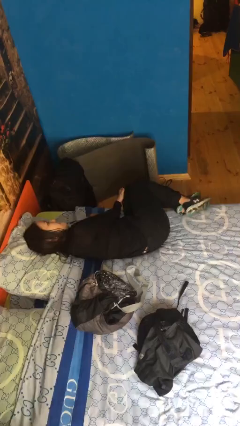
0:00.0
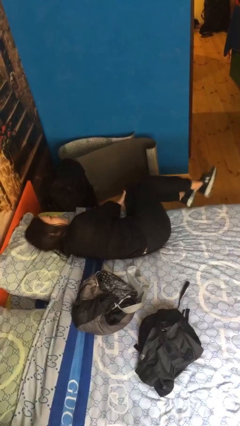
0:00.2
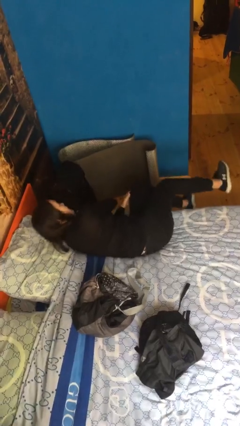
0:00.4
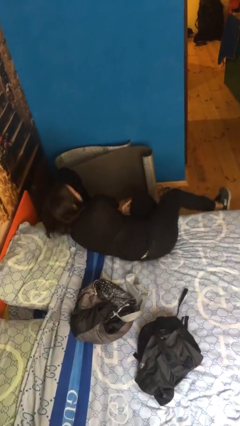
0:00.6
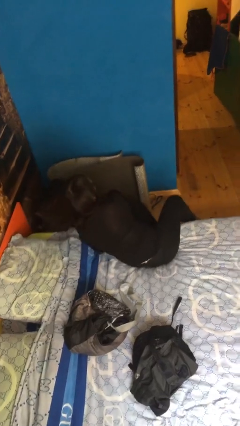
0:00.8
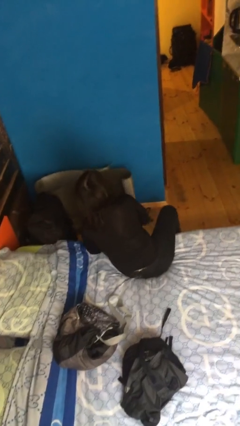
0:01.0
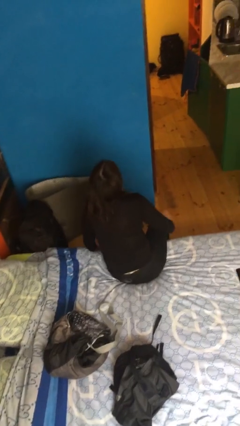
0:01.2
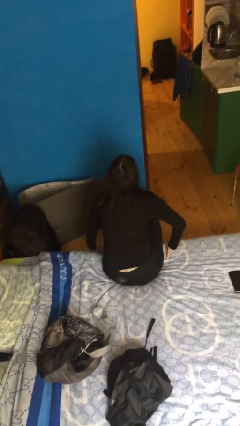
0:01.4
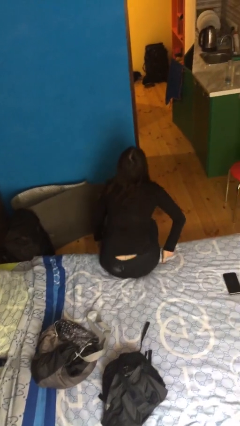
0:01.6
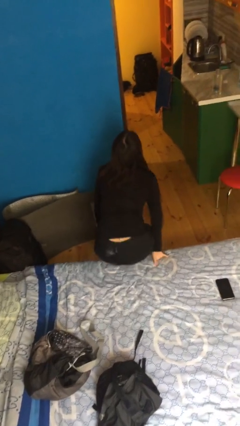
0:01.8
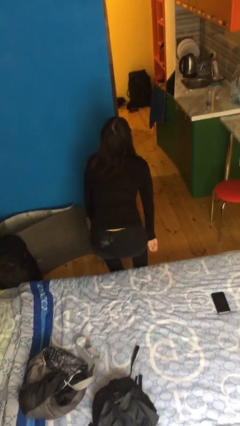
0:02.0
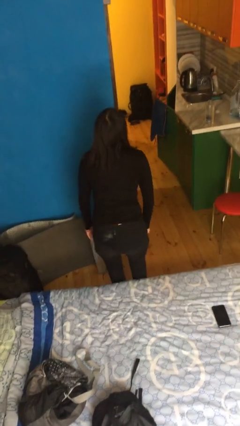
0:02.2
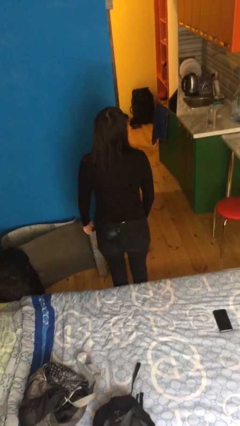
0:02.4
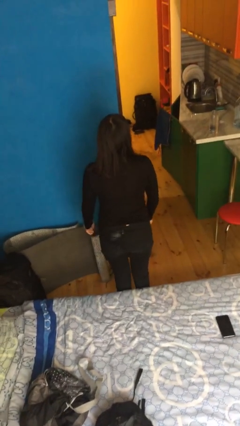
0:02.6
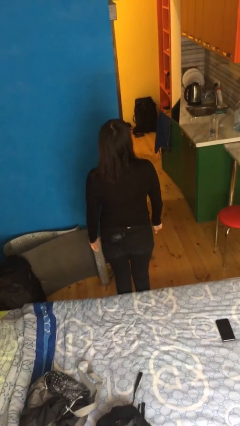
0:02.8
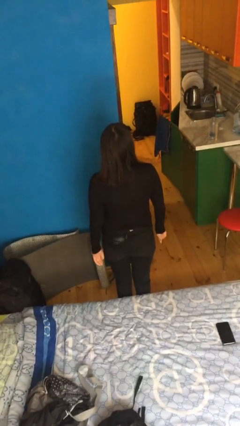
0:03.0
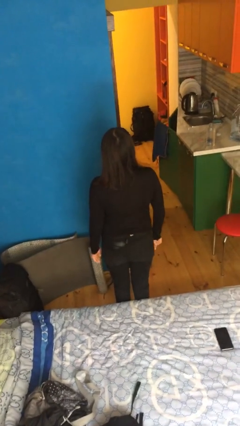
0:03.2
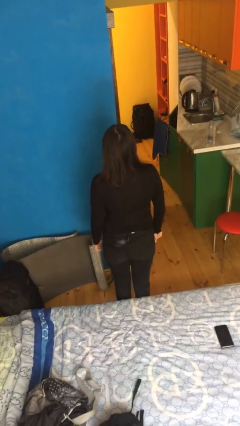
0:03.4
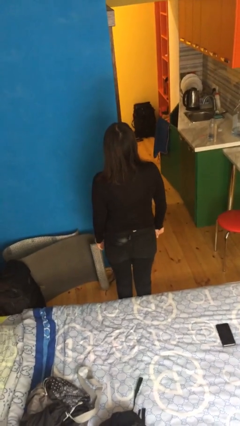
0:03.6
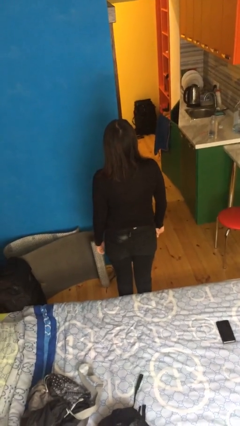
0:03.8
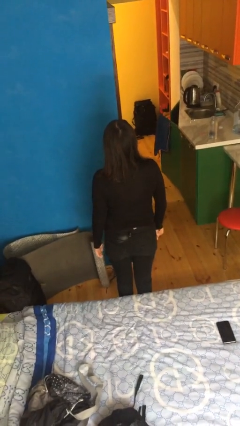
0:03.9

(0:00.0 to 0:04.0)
person stands up

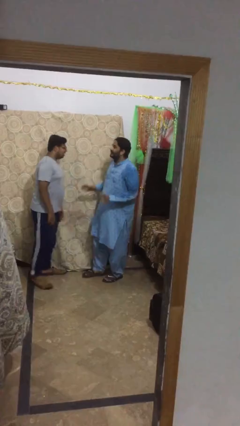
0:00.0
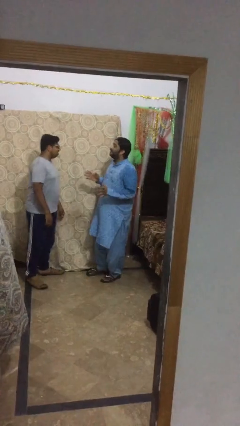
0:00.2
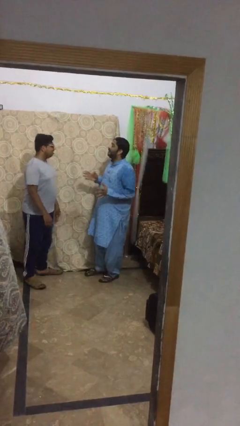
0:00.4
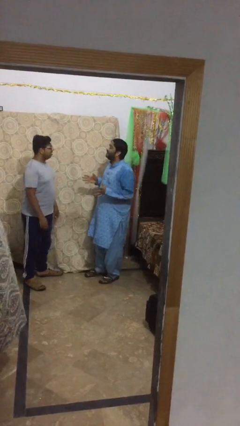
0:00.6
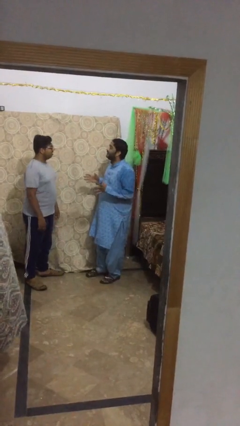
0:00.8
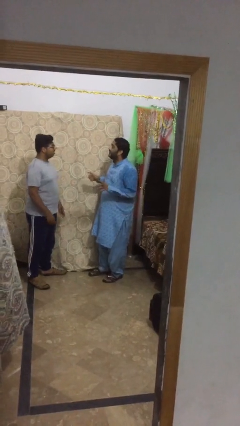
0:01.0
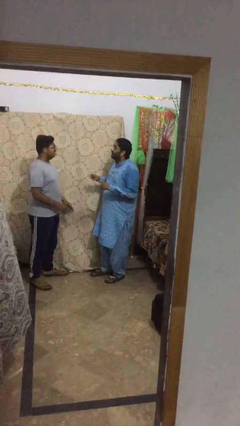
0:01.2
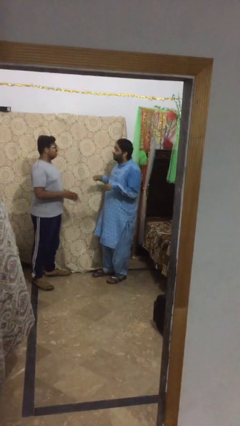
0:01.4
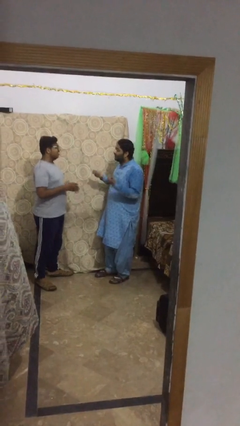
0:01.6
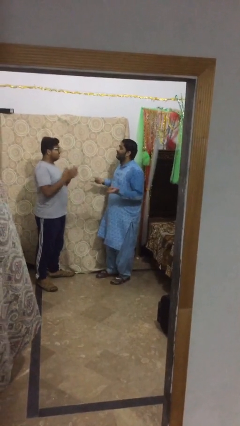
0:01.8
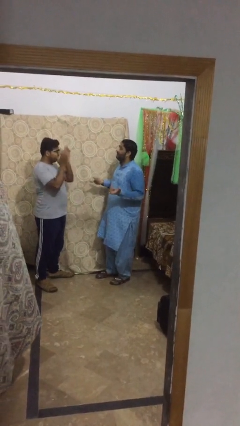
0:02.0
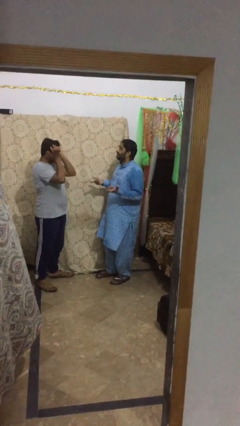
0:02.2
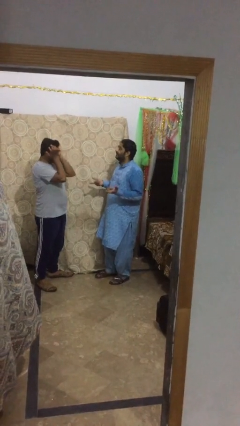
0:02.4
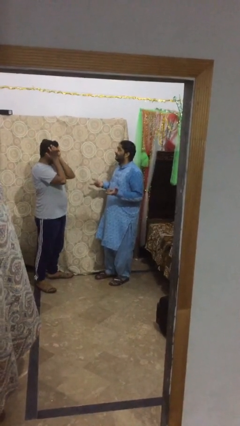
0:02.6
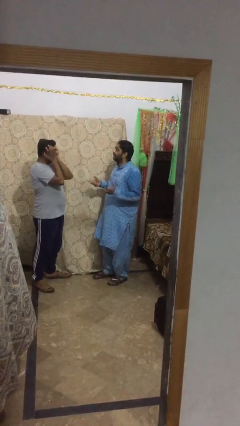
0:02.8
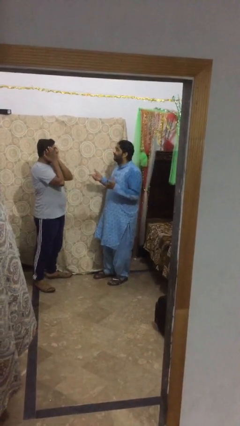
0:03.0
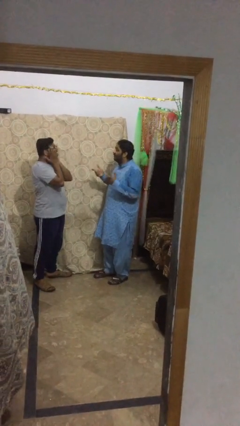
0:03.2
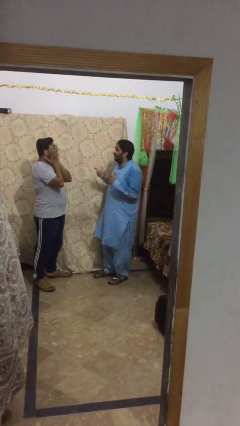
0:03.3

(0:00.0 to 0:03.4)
person talks to person

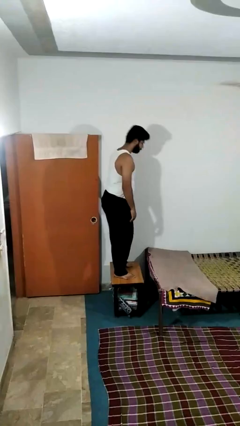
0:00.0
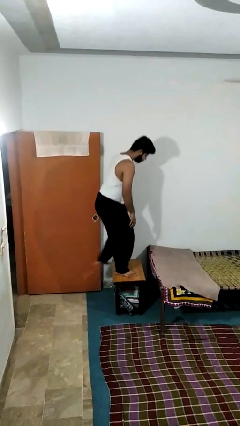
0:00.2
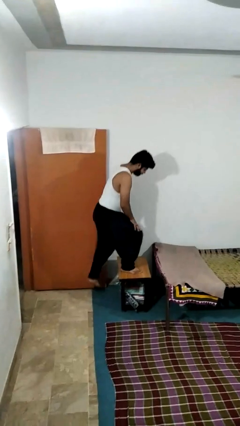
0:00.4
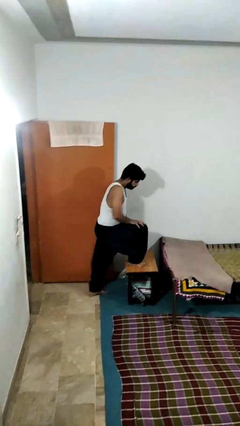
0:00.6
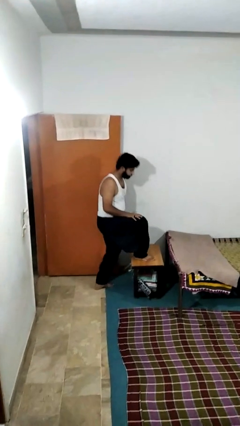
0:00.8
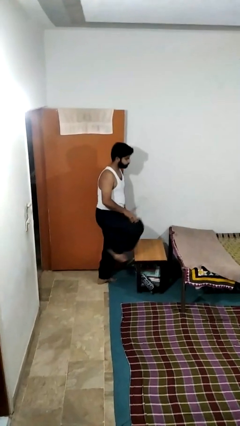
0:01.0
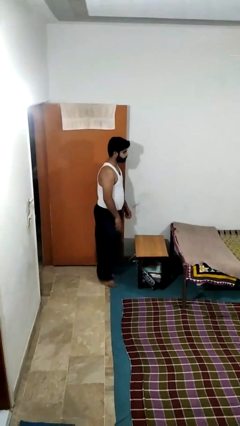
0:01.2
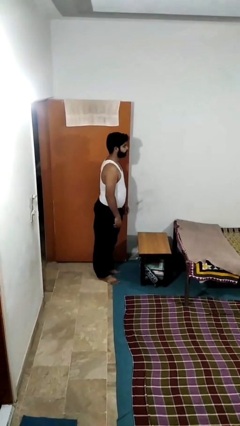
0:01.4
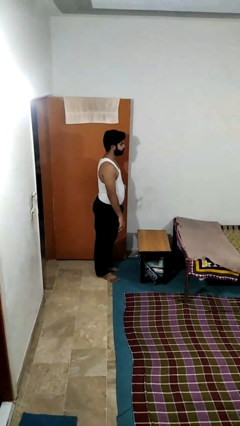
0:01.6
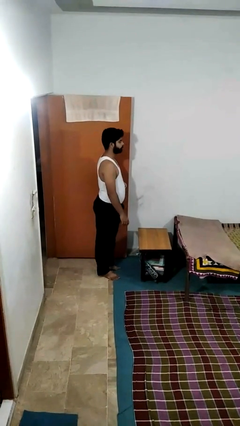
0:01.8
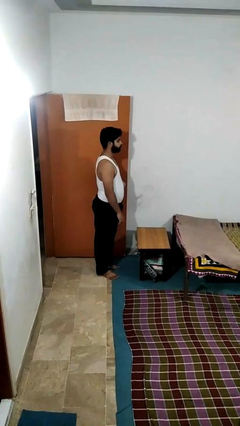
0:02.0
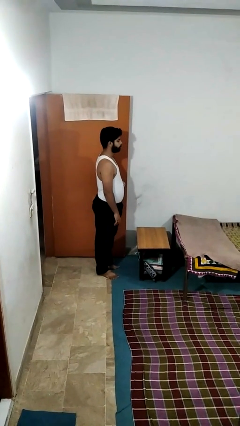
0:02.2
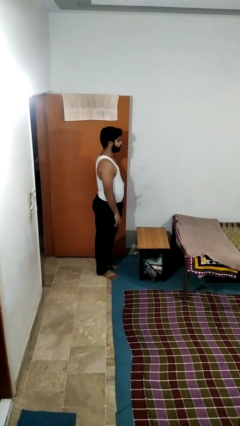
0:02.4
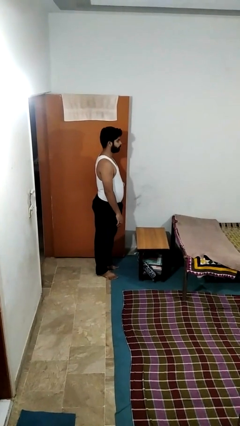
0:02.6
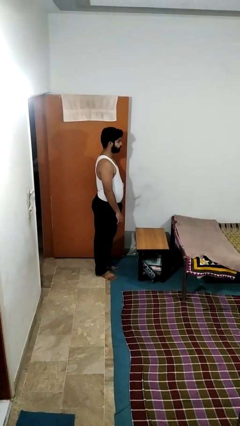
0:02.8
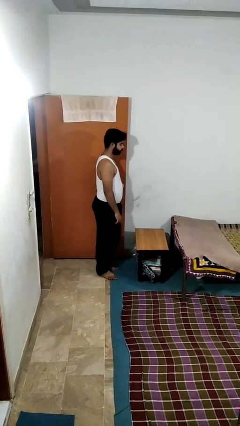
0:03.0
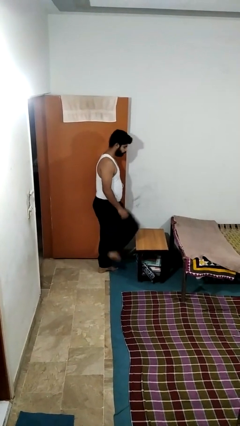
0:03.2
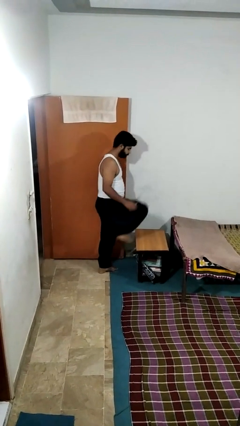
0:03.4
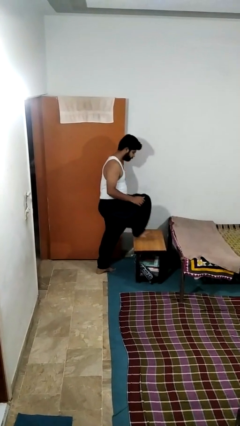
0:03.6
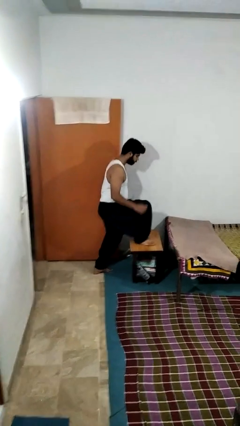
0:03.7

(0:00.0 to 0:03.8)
person climbs off table

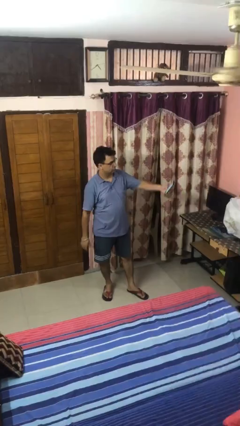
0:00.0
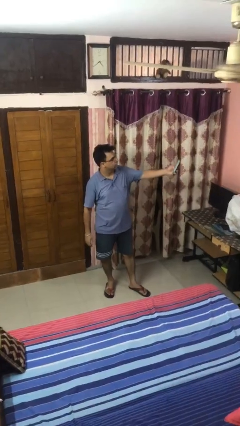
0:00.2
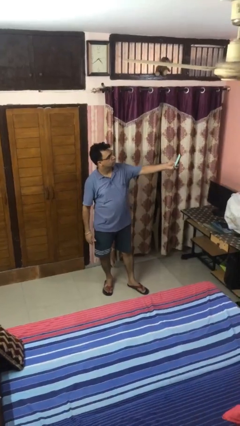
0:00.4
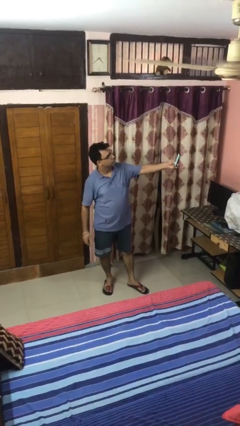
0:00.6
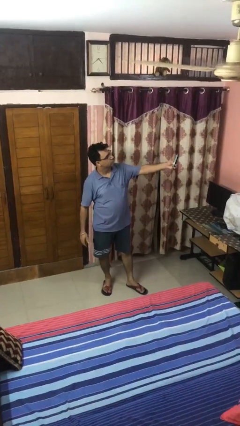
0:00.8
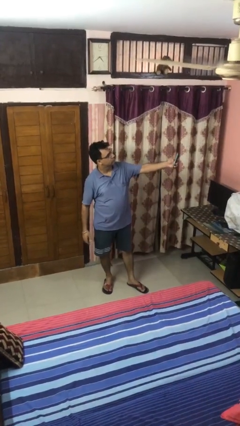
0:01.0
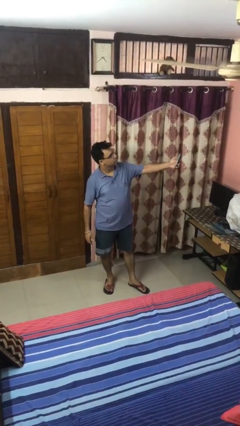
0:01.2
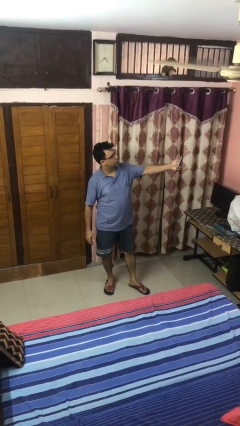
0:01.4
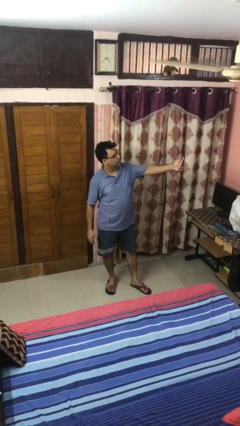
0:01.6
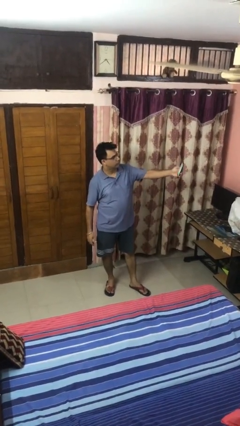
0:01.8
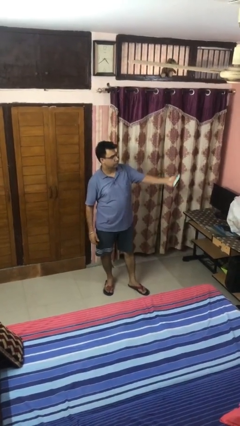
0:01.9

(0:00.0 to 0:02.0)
person takes selfie

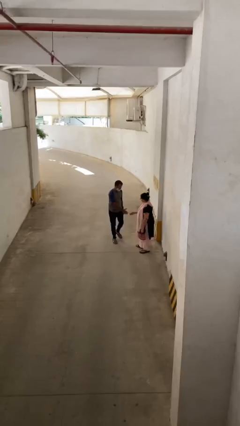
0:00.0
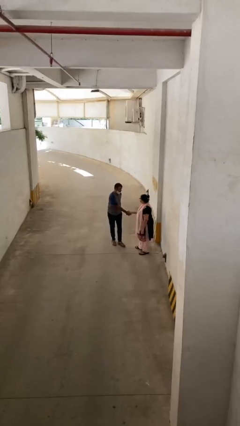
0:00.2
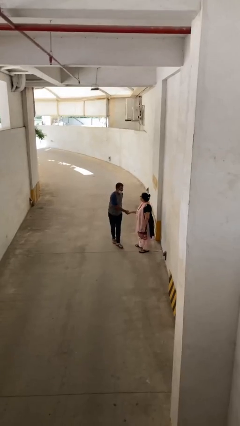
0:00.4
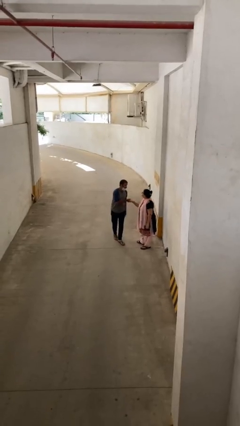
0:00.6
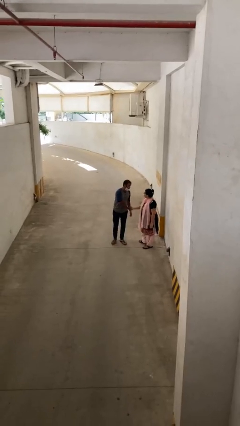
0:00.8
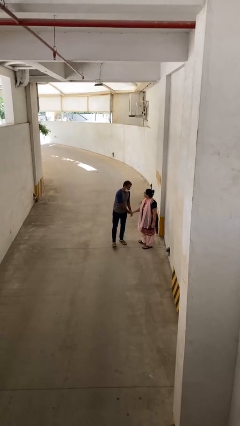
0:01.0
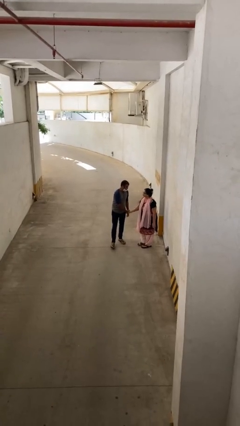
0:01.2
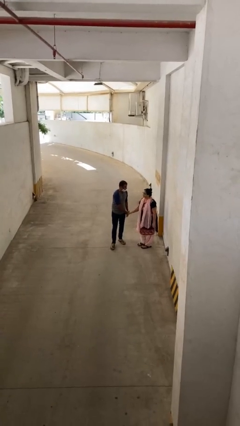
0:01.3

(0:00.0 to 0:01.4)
person shakes hand

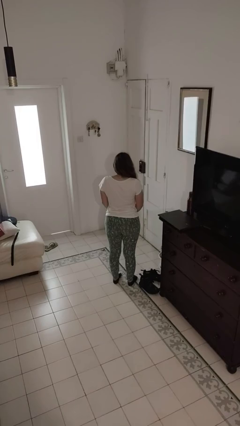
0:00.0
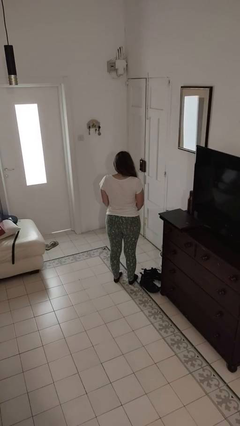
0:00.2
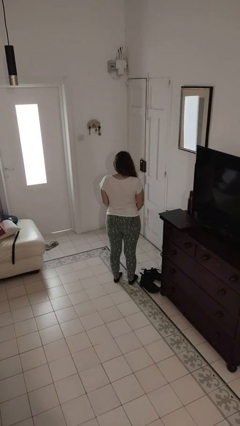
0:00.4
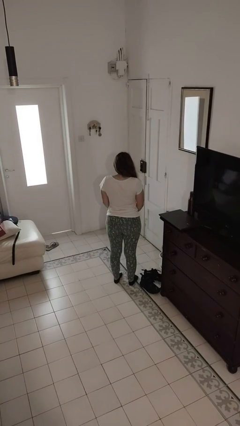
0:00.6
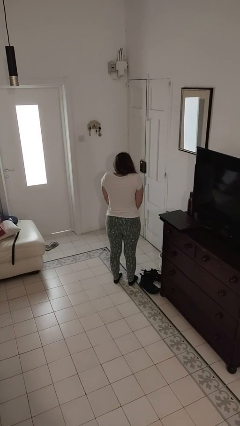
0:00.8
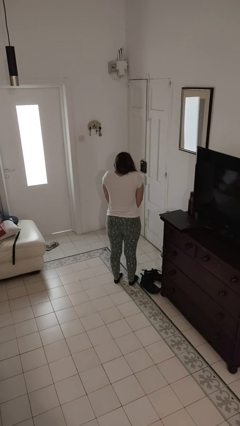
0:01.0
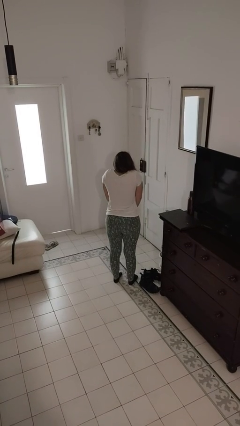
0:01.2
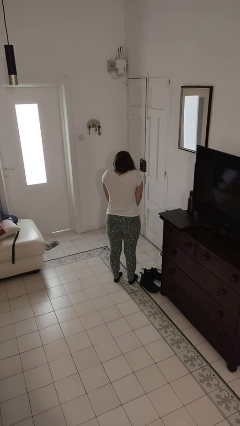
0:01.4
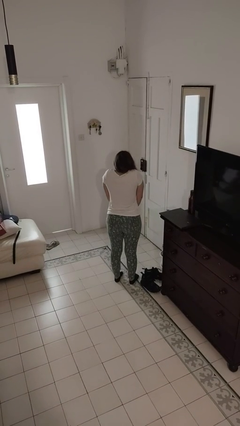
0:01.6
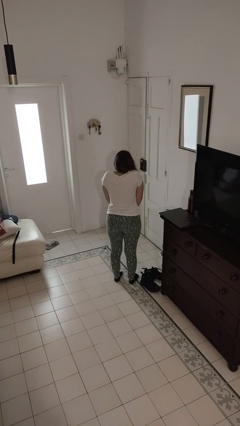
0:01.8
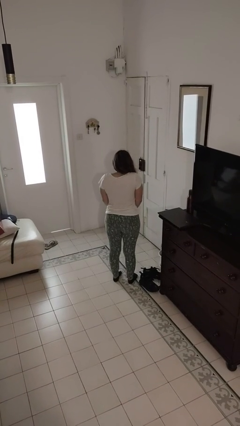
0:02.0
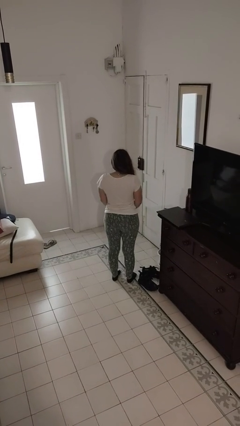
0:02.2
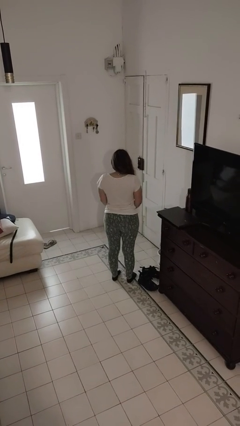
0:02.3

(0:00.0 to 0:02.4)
person shrugs

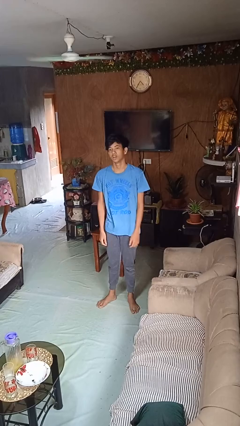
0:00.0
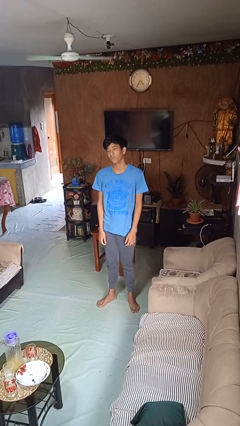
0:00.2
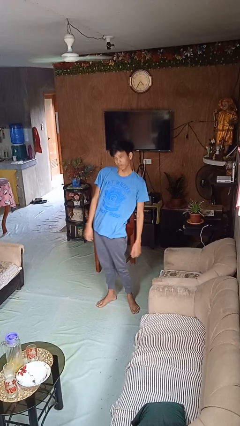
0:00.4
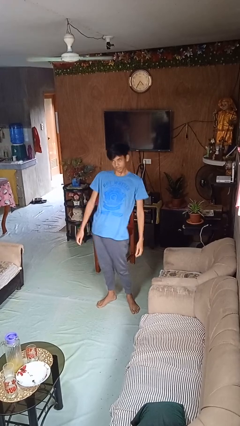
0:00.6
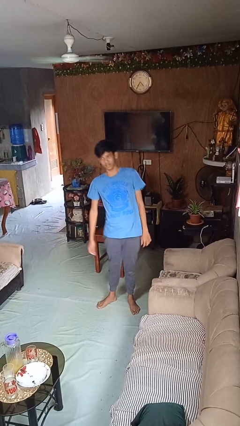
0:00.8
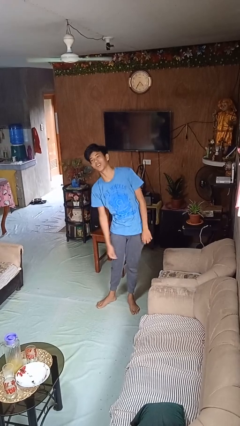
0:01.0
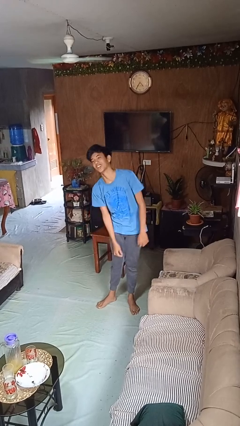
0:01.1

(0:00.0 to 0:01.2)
person dances in place
